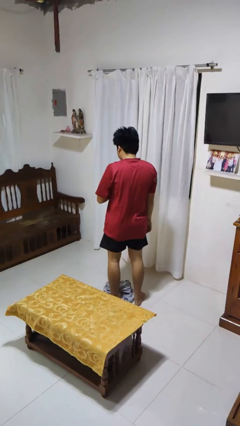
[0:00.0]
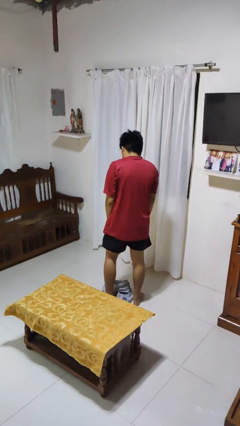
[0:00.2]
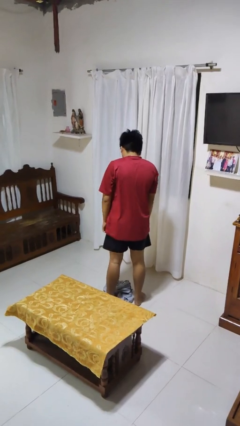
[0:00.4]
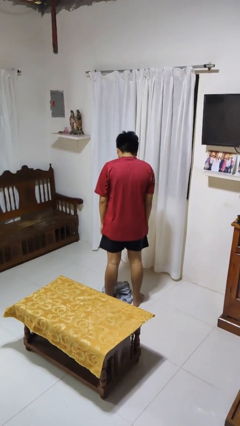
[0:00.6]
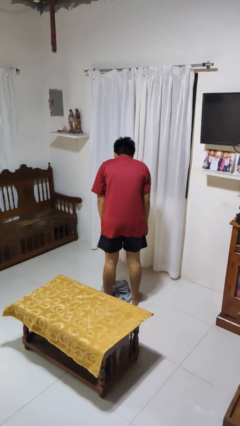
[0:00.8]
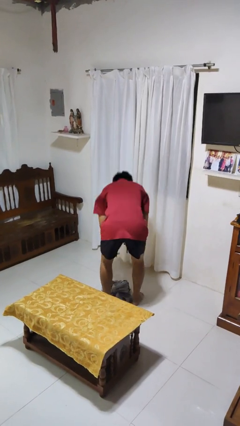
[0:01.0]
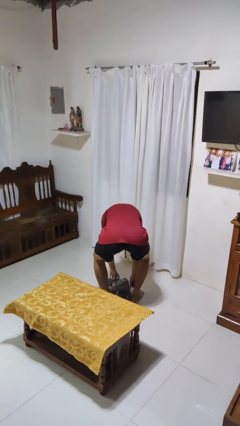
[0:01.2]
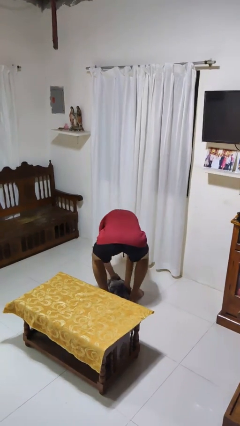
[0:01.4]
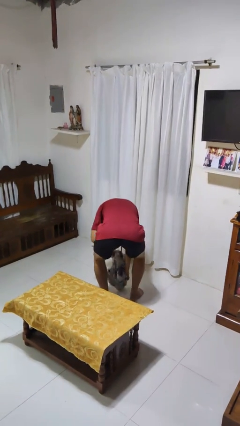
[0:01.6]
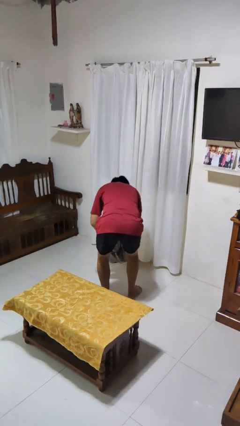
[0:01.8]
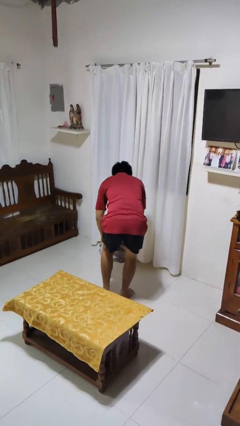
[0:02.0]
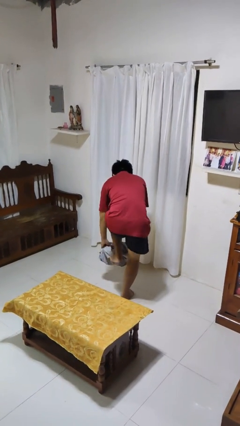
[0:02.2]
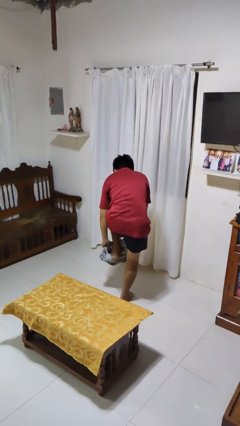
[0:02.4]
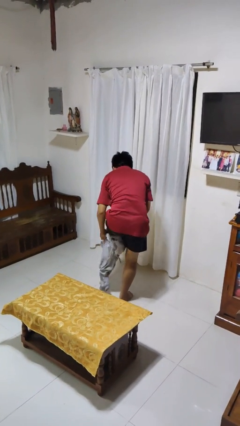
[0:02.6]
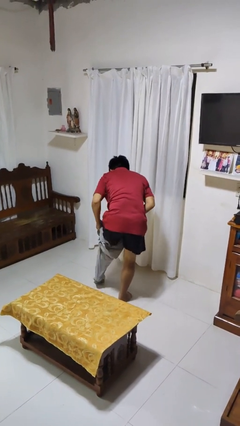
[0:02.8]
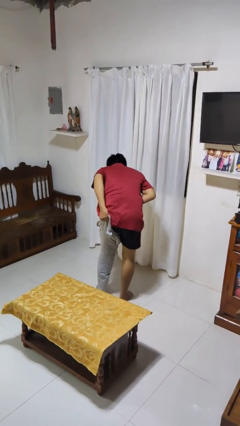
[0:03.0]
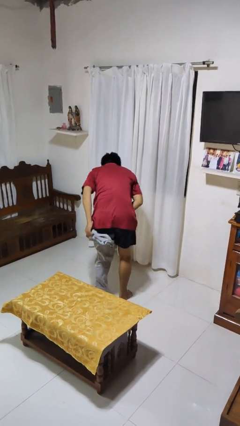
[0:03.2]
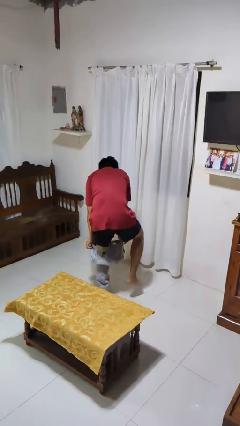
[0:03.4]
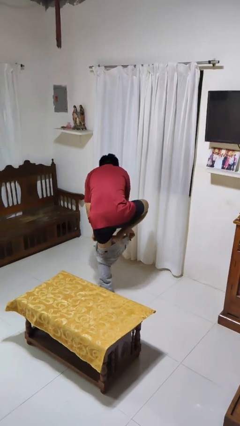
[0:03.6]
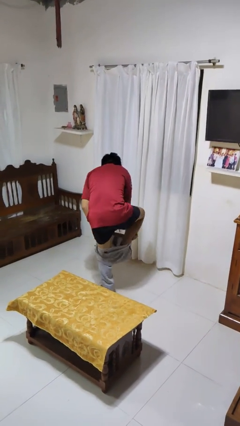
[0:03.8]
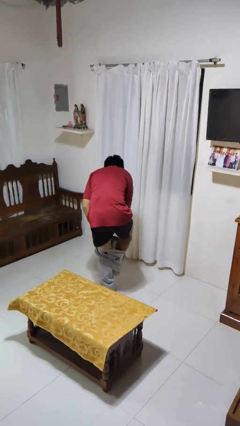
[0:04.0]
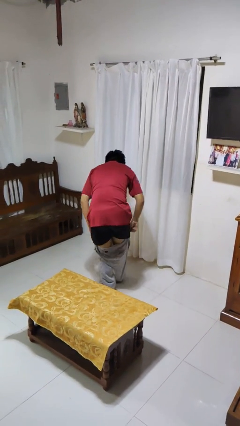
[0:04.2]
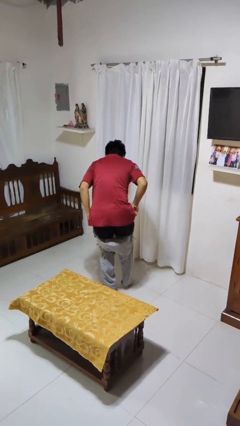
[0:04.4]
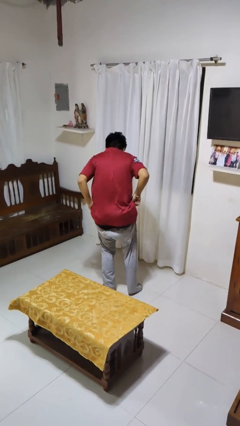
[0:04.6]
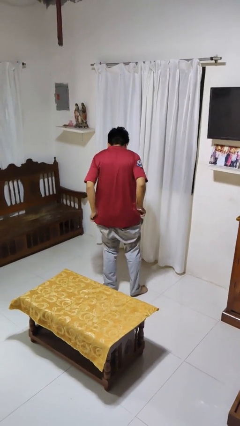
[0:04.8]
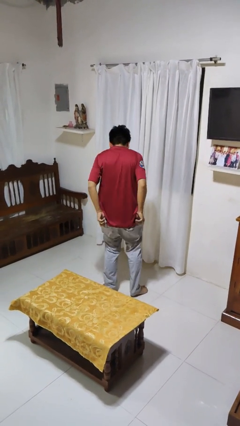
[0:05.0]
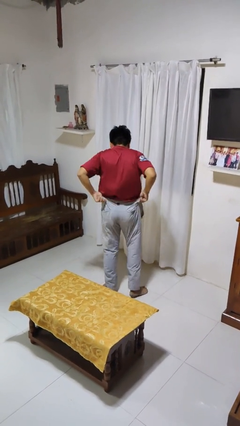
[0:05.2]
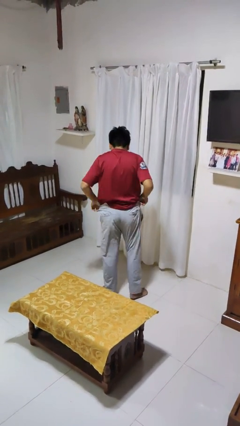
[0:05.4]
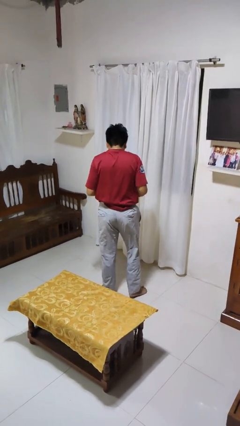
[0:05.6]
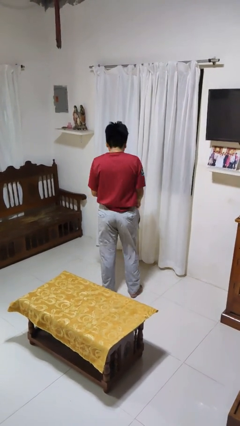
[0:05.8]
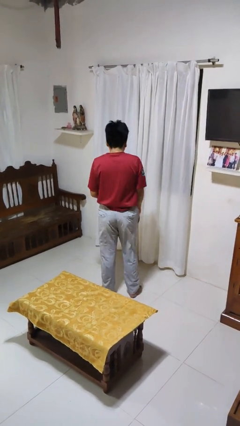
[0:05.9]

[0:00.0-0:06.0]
person puts on pants

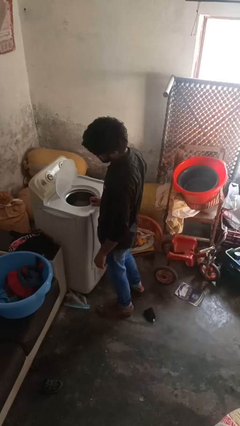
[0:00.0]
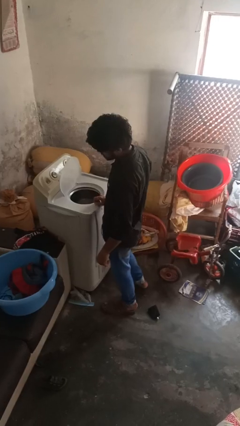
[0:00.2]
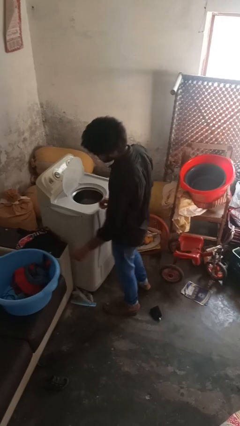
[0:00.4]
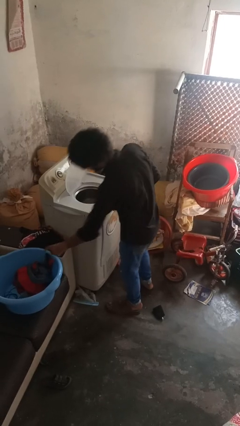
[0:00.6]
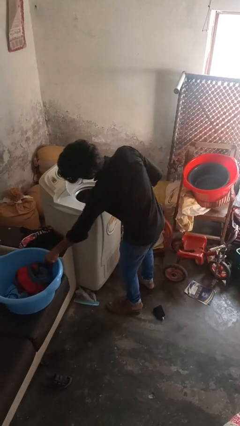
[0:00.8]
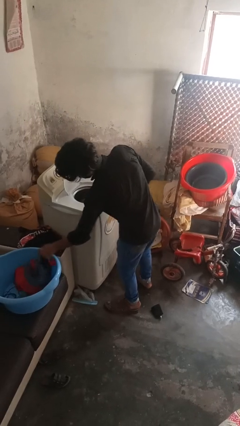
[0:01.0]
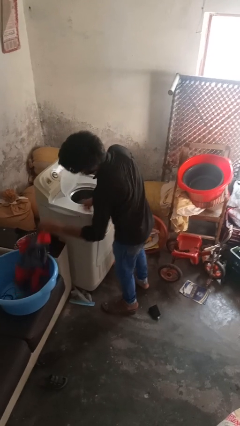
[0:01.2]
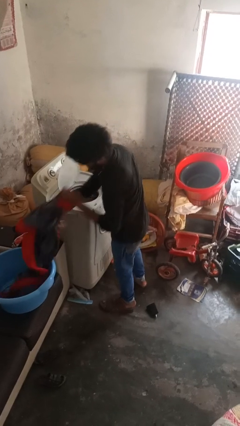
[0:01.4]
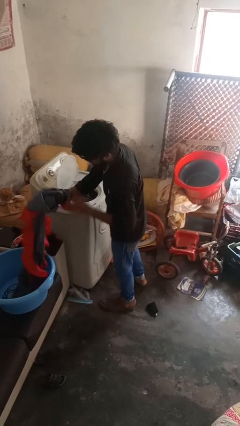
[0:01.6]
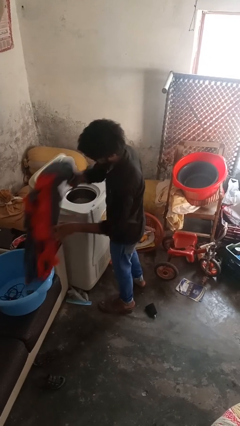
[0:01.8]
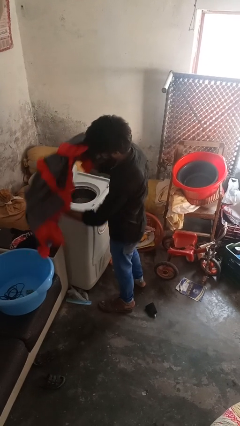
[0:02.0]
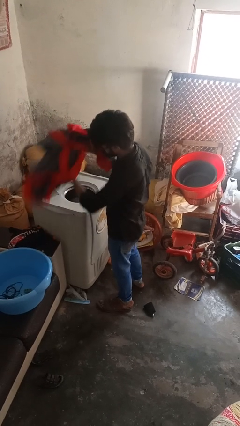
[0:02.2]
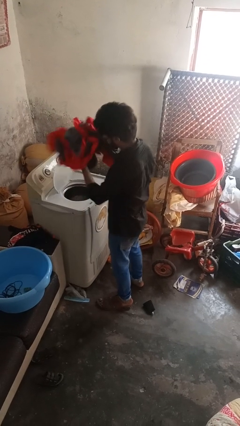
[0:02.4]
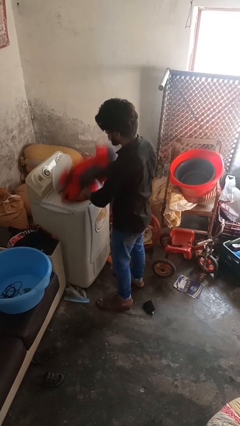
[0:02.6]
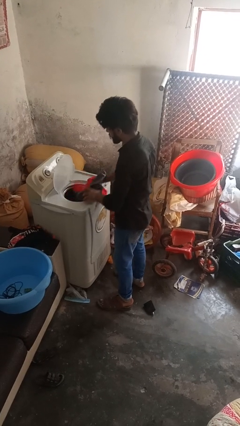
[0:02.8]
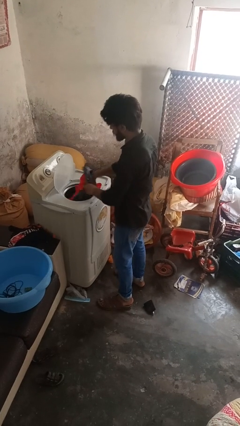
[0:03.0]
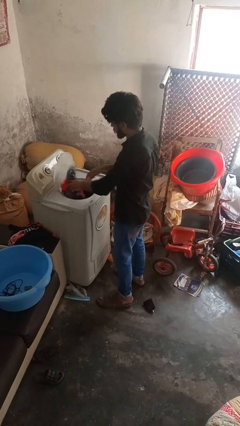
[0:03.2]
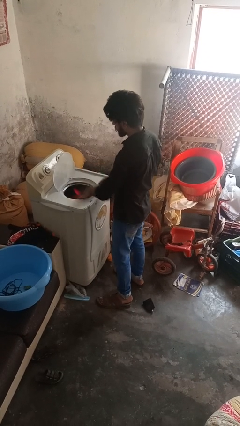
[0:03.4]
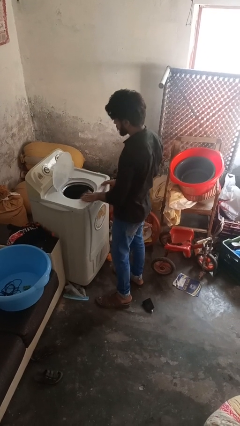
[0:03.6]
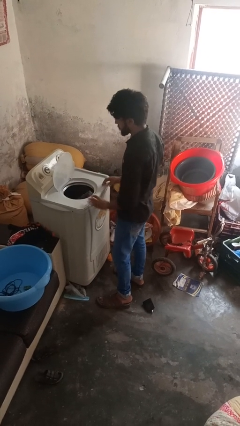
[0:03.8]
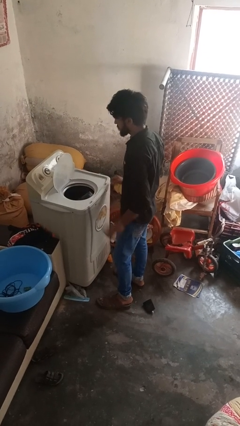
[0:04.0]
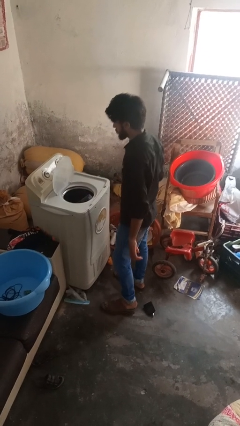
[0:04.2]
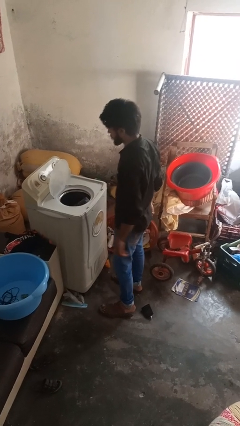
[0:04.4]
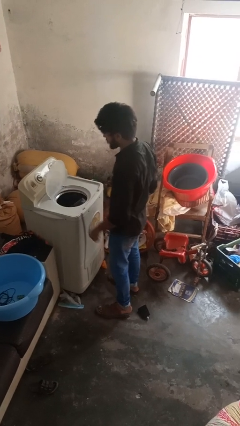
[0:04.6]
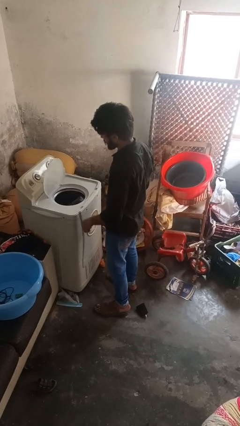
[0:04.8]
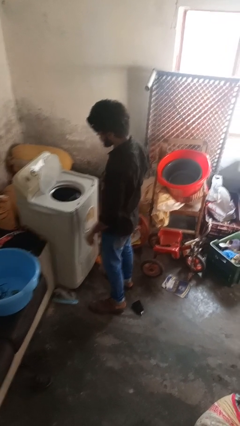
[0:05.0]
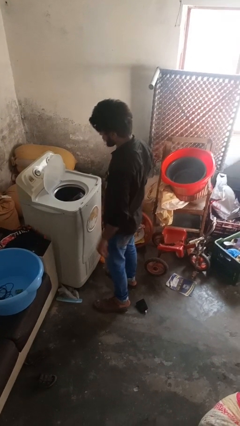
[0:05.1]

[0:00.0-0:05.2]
person loads clotheswasher

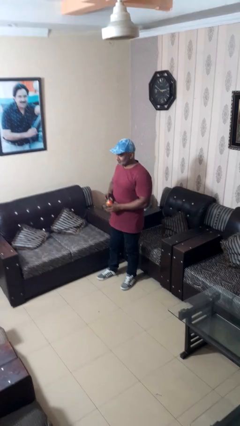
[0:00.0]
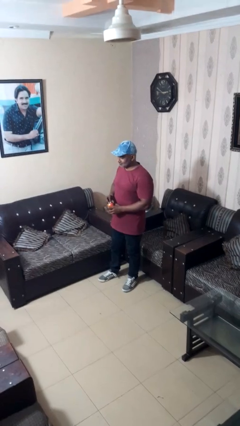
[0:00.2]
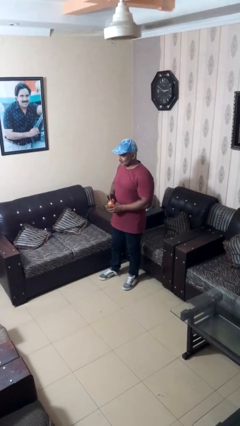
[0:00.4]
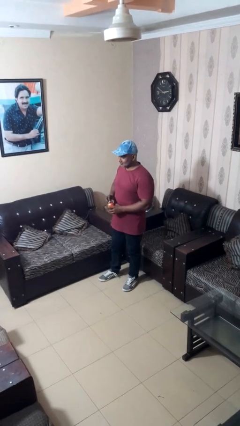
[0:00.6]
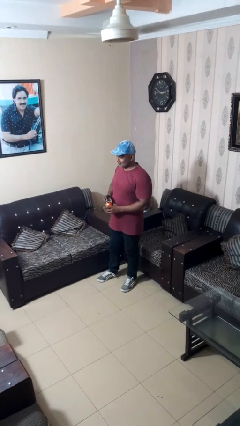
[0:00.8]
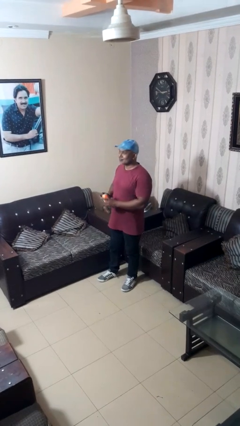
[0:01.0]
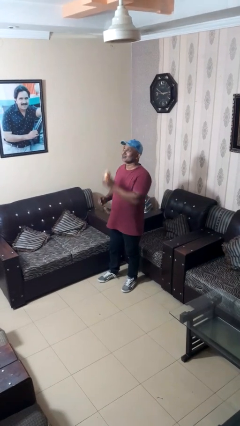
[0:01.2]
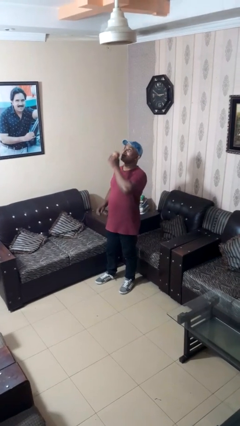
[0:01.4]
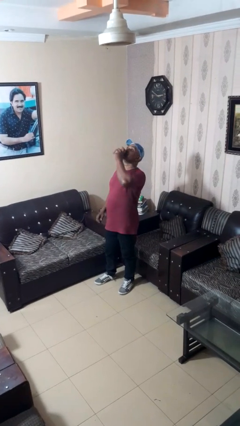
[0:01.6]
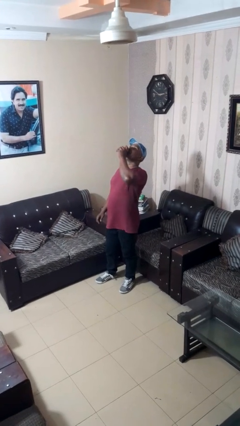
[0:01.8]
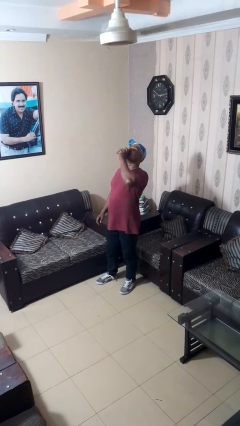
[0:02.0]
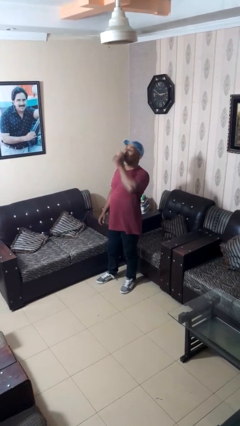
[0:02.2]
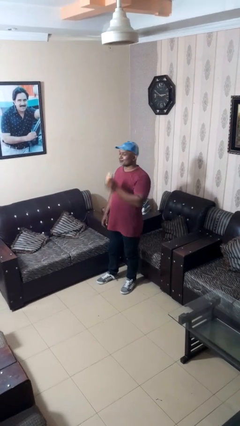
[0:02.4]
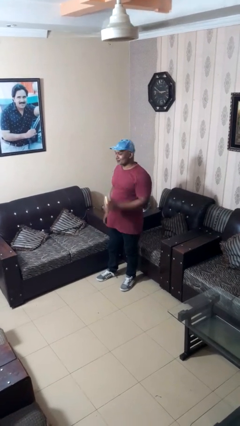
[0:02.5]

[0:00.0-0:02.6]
person drinks from beverage can

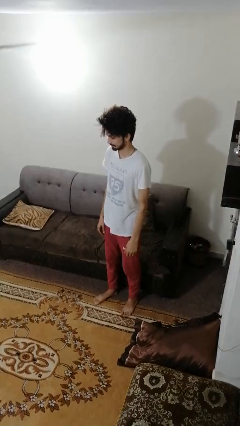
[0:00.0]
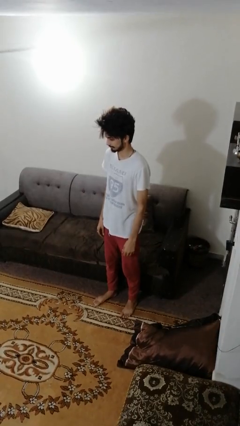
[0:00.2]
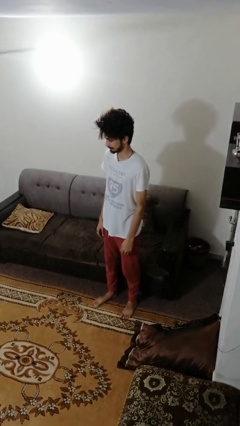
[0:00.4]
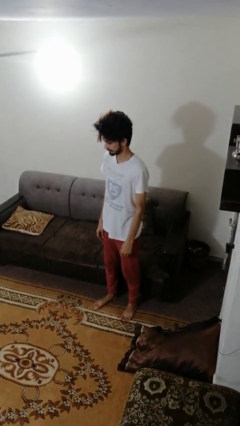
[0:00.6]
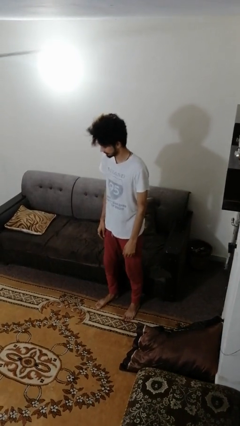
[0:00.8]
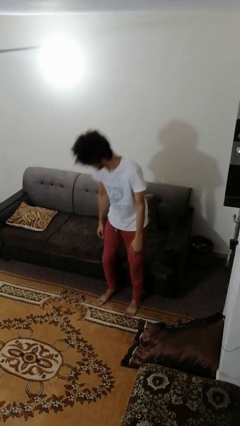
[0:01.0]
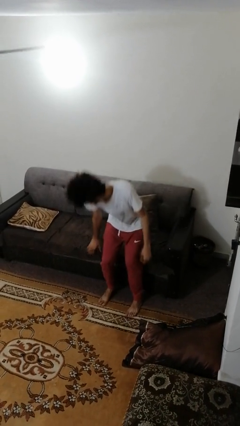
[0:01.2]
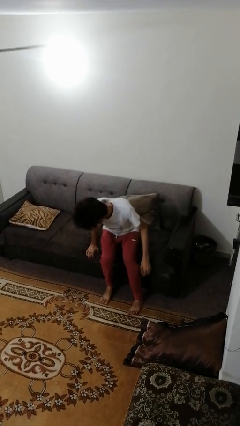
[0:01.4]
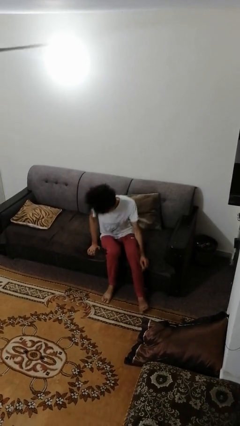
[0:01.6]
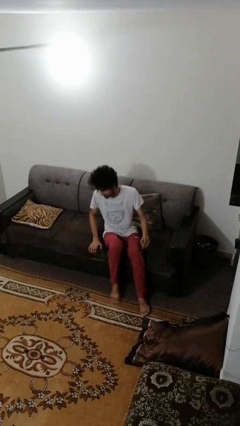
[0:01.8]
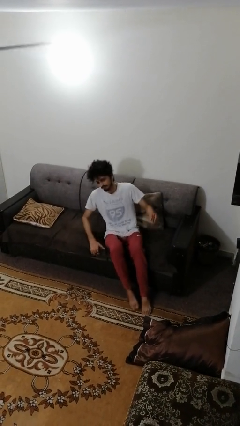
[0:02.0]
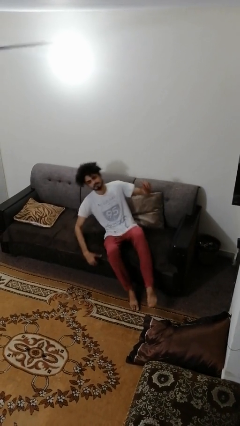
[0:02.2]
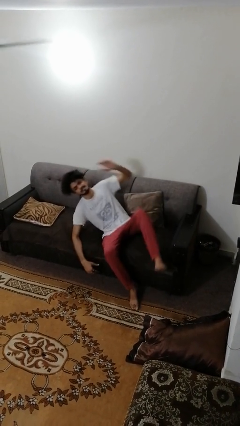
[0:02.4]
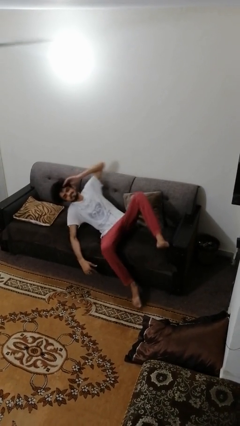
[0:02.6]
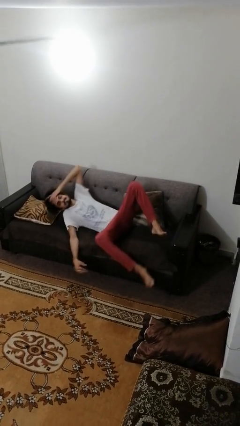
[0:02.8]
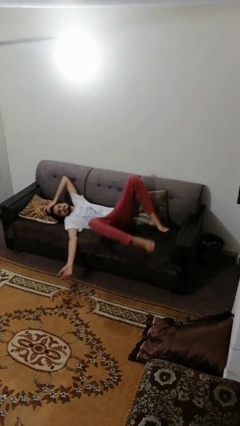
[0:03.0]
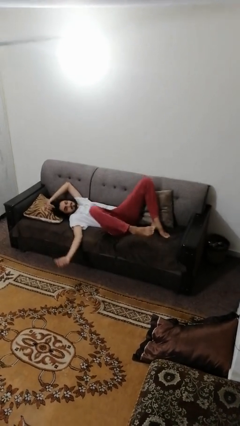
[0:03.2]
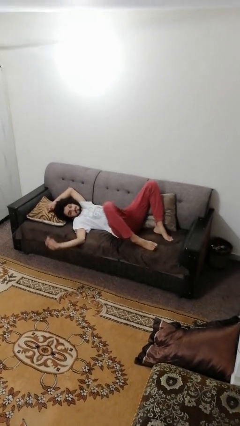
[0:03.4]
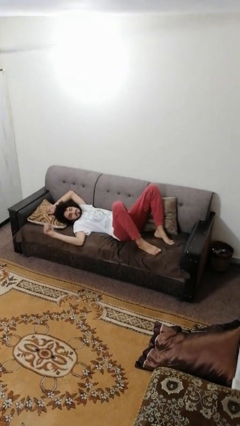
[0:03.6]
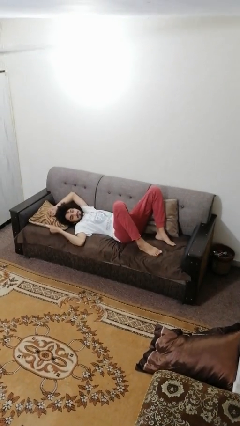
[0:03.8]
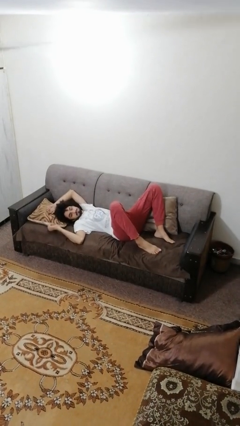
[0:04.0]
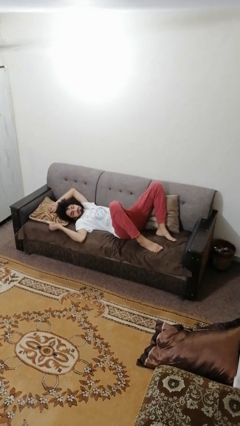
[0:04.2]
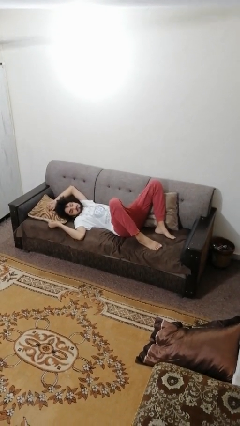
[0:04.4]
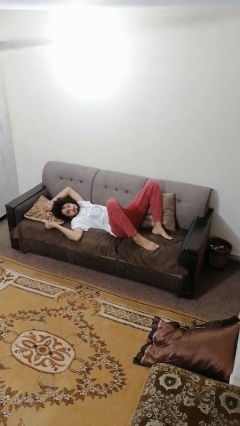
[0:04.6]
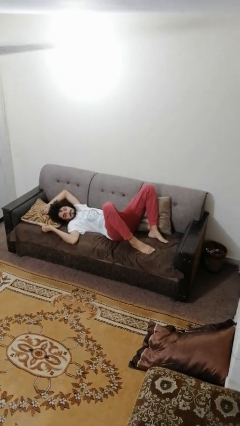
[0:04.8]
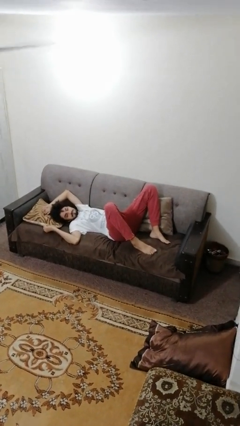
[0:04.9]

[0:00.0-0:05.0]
person lies down on couch
